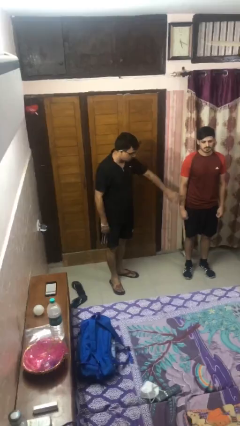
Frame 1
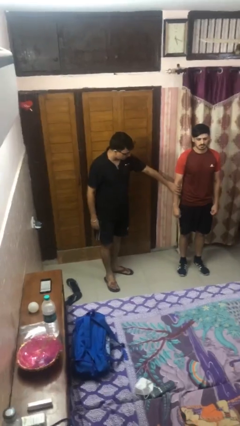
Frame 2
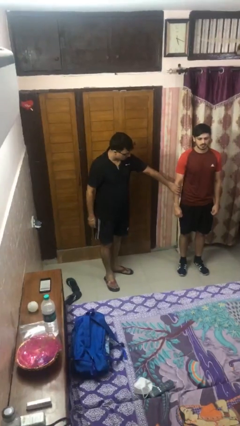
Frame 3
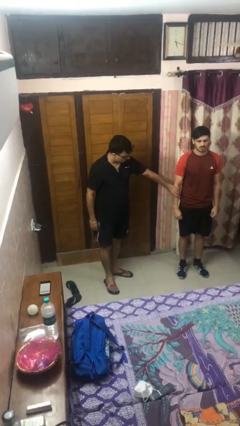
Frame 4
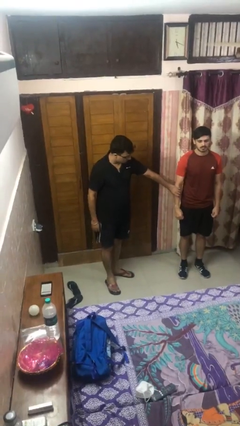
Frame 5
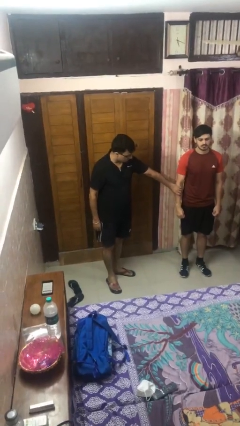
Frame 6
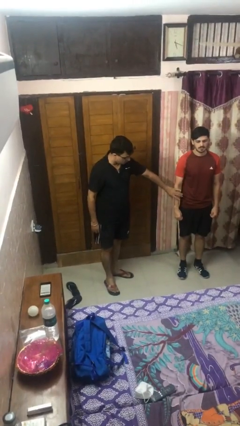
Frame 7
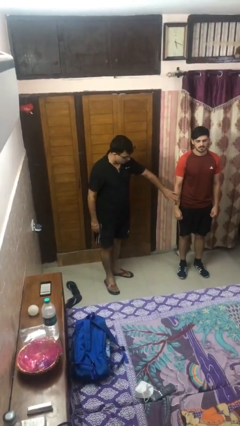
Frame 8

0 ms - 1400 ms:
person grabs person by forearm

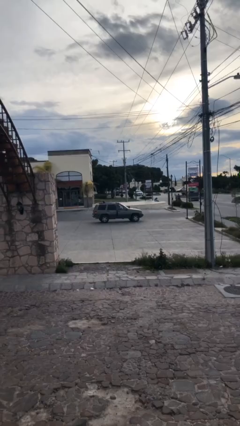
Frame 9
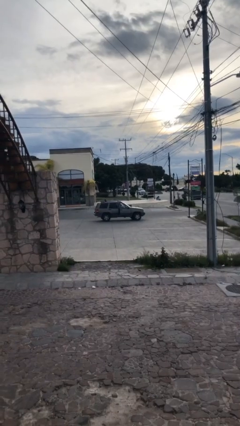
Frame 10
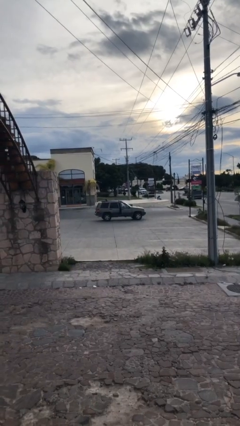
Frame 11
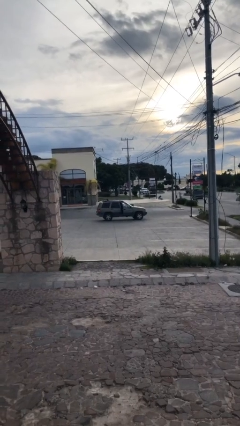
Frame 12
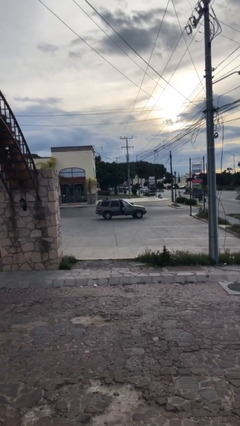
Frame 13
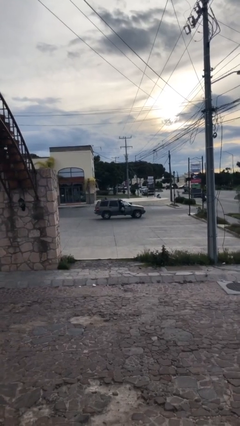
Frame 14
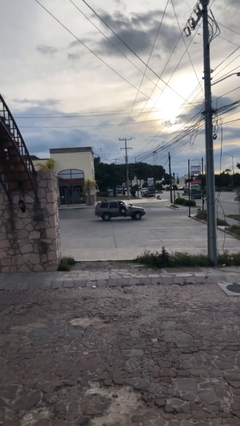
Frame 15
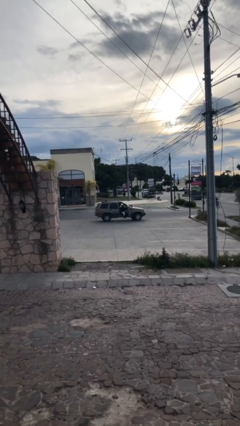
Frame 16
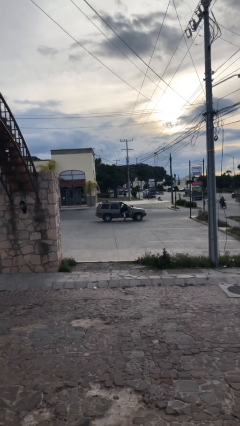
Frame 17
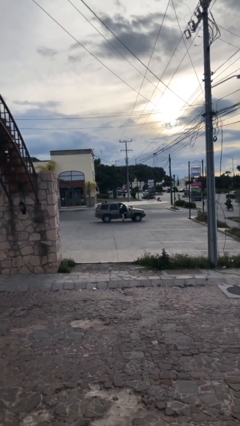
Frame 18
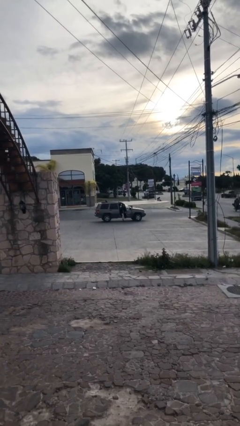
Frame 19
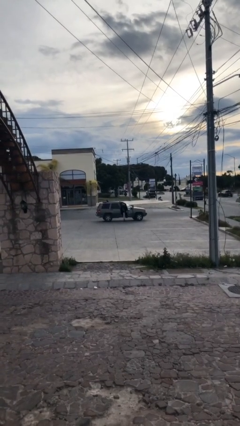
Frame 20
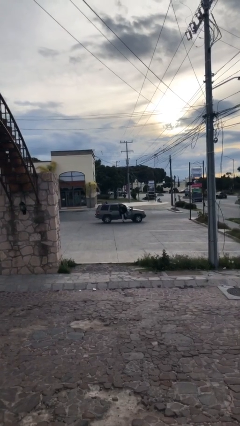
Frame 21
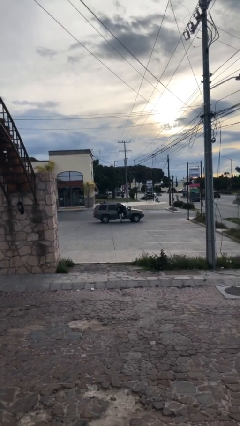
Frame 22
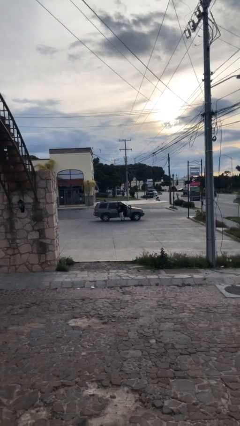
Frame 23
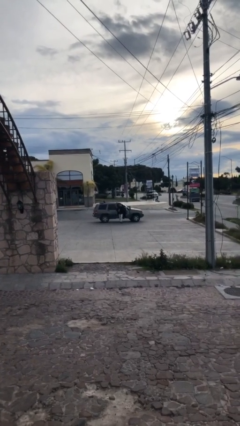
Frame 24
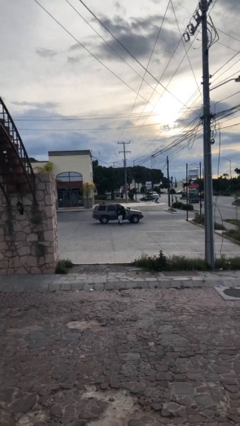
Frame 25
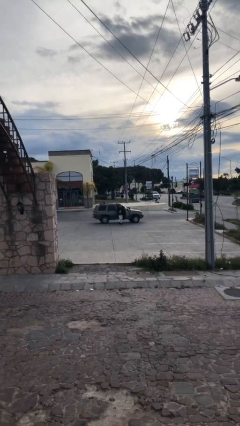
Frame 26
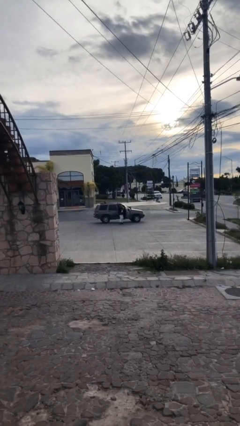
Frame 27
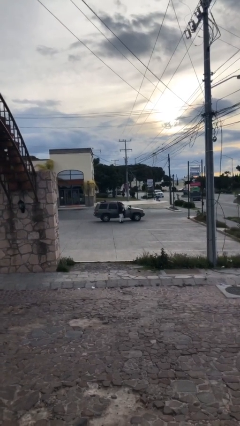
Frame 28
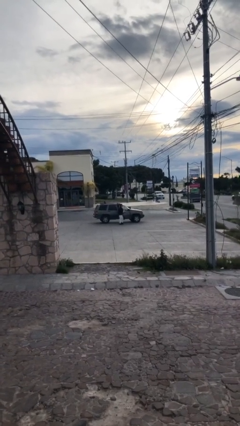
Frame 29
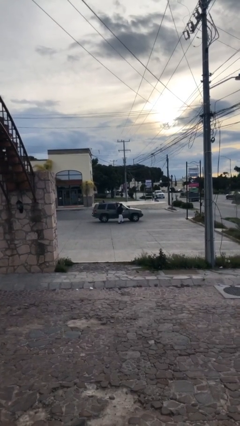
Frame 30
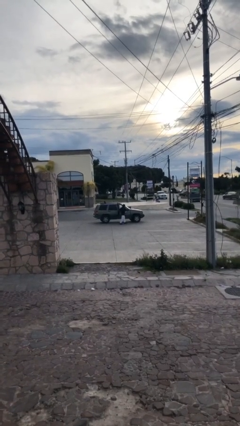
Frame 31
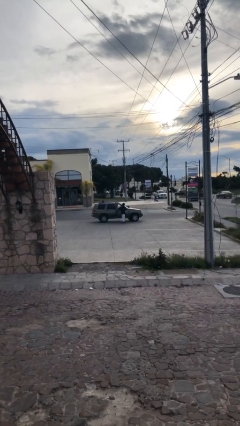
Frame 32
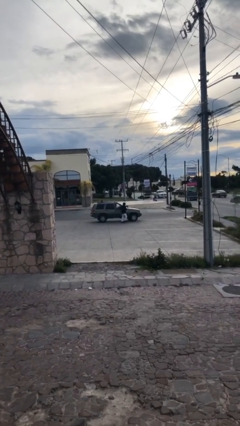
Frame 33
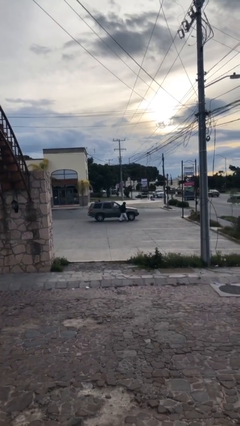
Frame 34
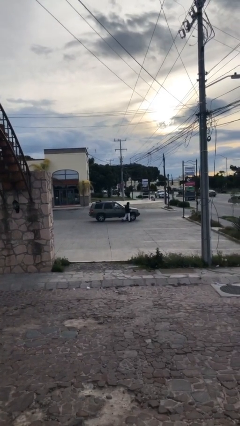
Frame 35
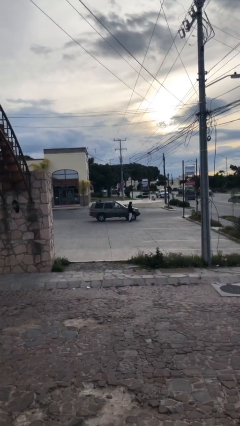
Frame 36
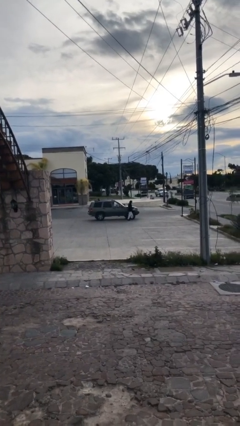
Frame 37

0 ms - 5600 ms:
car drops off person

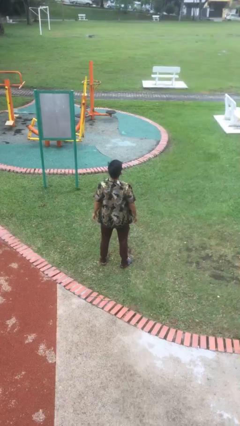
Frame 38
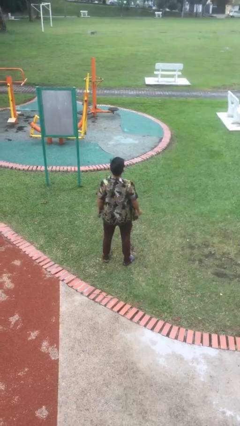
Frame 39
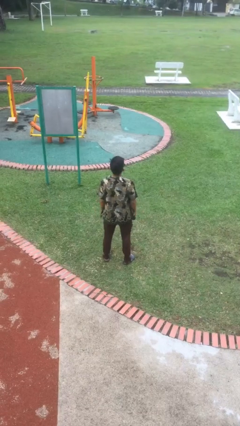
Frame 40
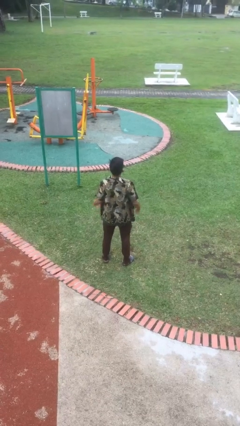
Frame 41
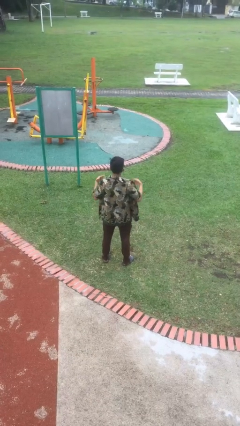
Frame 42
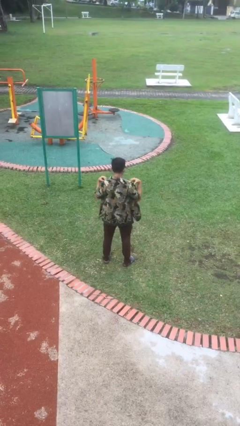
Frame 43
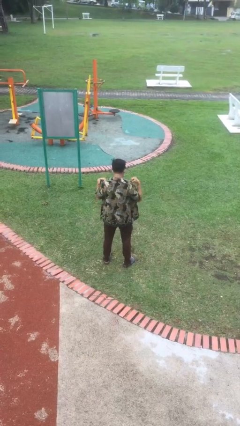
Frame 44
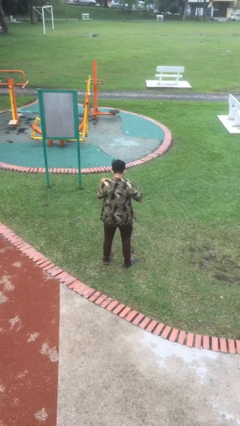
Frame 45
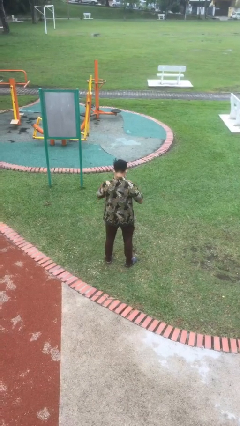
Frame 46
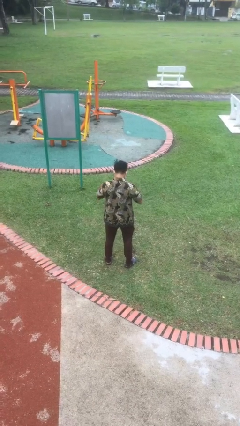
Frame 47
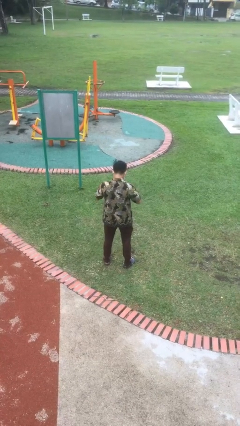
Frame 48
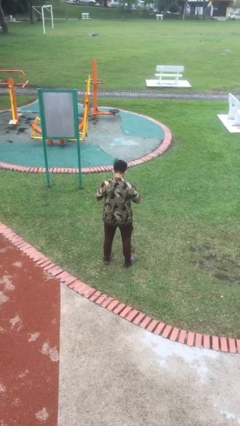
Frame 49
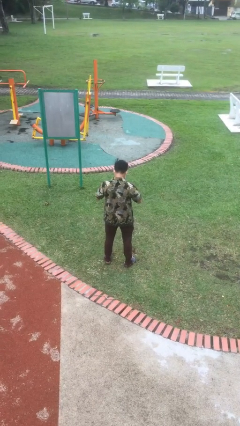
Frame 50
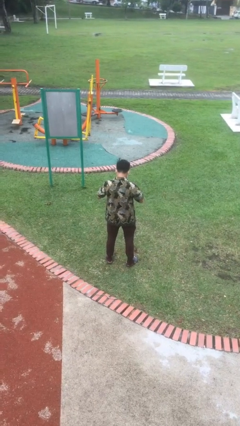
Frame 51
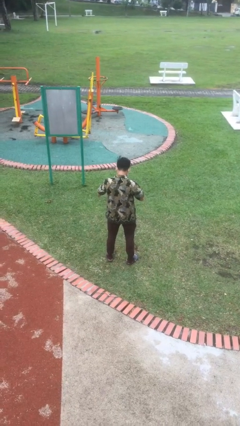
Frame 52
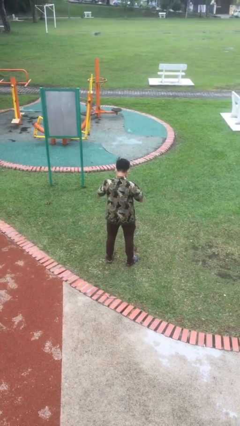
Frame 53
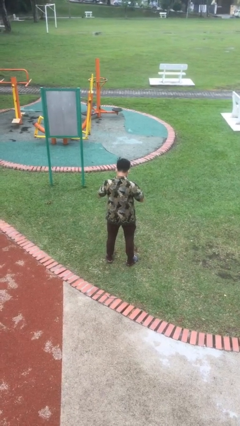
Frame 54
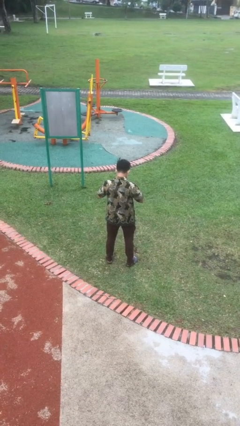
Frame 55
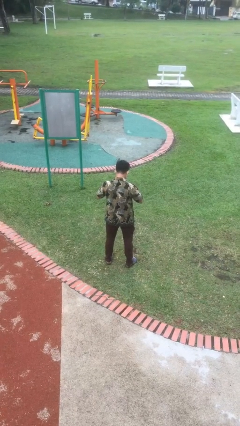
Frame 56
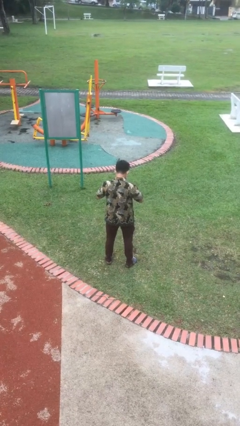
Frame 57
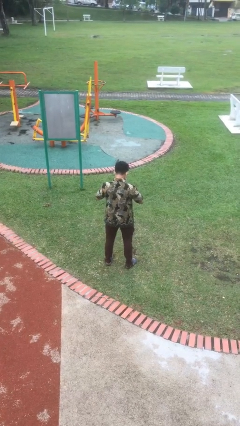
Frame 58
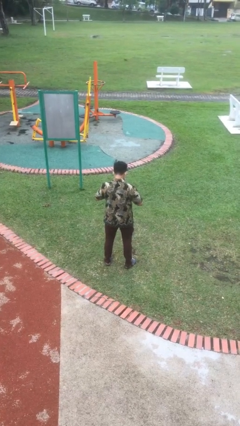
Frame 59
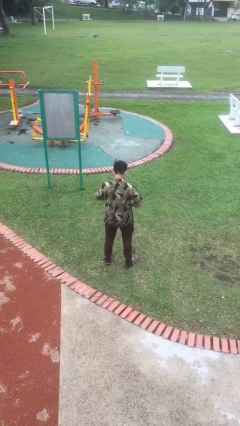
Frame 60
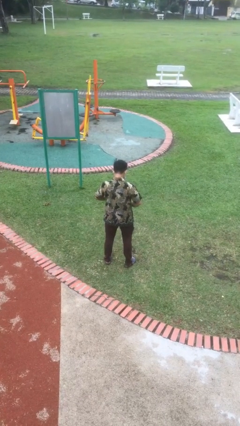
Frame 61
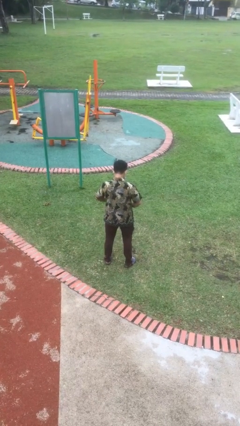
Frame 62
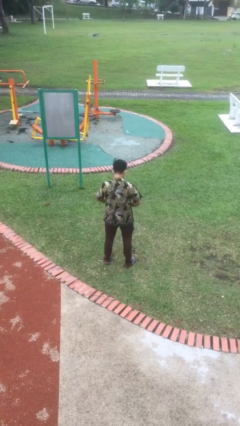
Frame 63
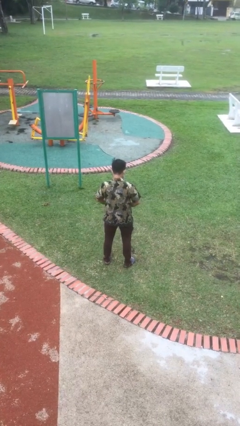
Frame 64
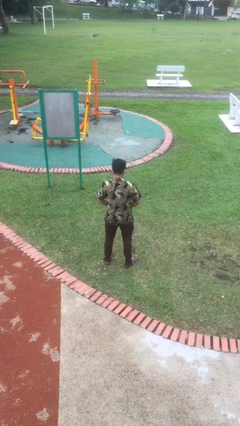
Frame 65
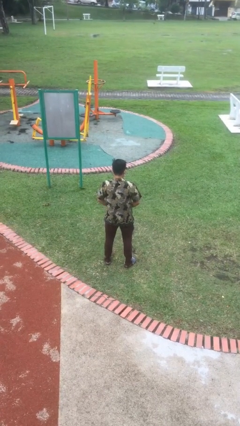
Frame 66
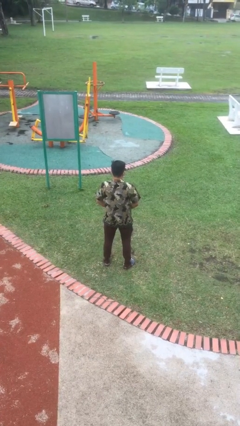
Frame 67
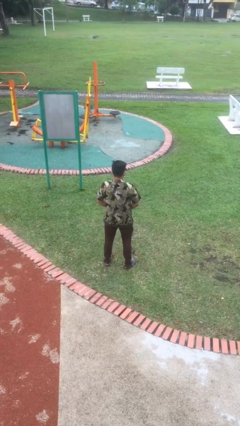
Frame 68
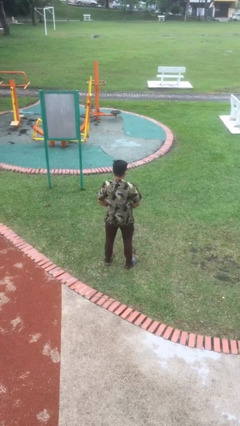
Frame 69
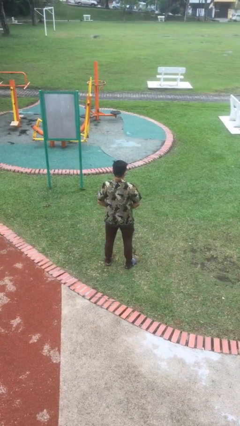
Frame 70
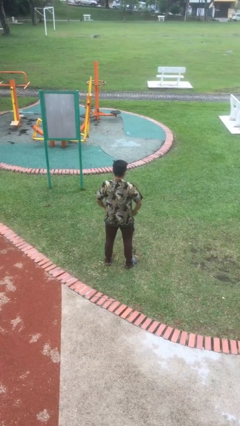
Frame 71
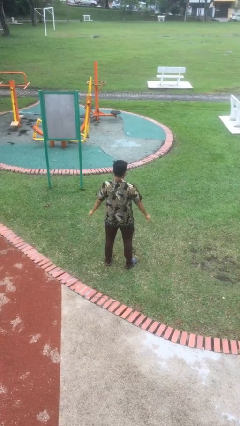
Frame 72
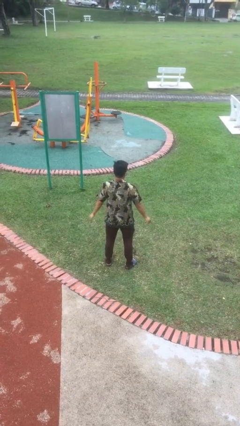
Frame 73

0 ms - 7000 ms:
person buttons shirt

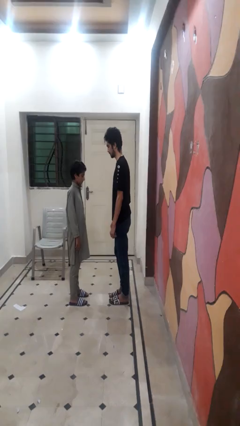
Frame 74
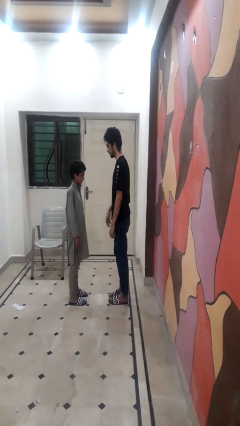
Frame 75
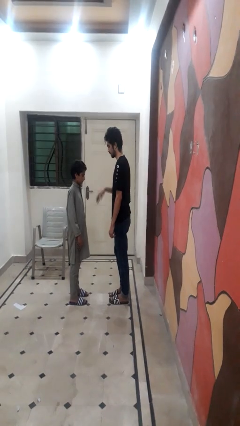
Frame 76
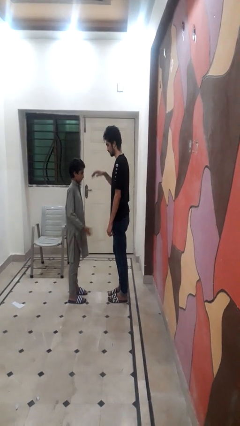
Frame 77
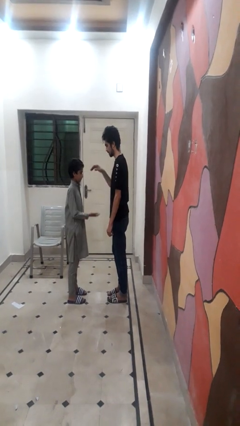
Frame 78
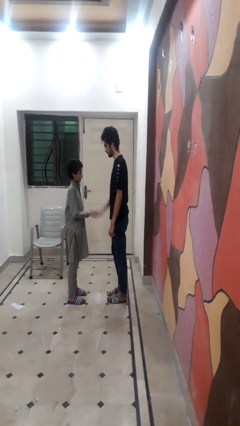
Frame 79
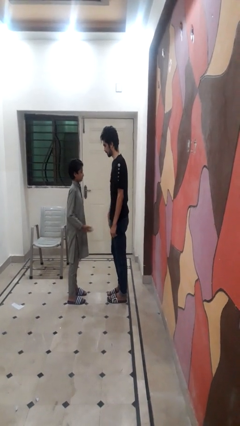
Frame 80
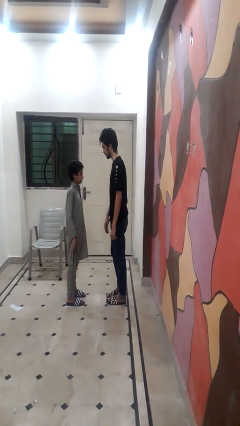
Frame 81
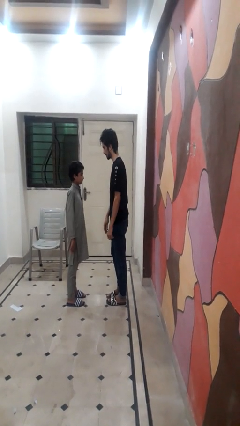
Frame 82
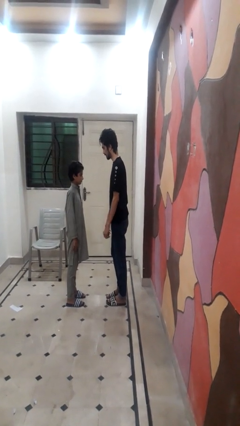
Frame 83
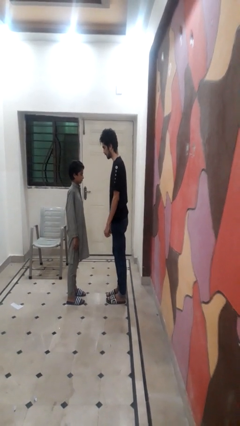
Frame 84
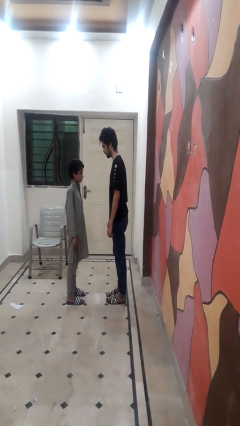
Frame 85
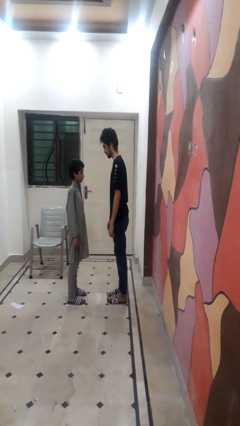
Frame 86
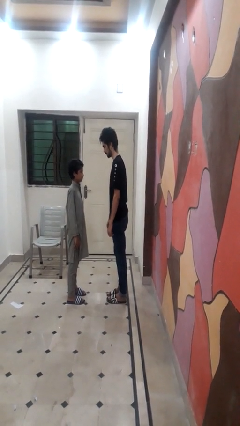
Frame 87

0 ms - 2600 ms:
person highfives hand

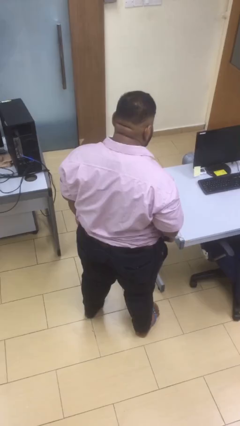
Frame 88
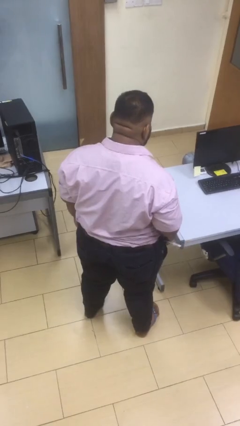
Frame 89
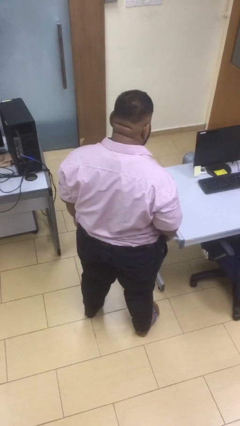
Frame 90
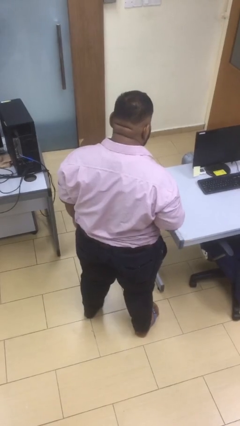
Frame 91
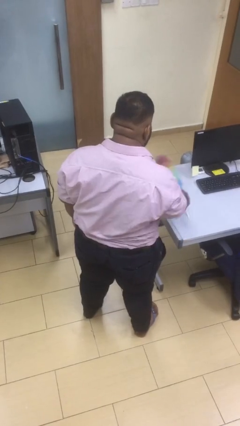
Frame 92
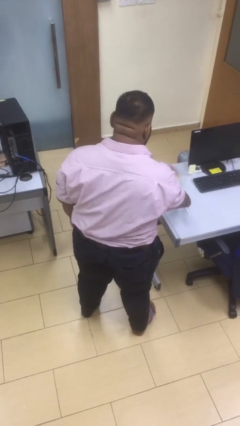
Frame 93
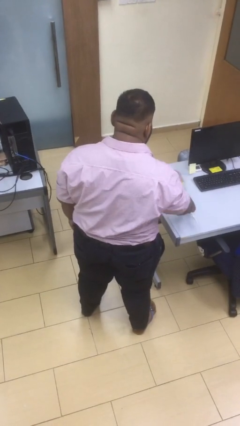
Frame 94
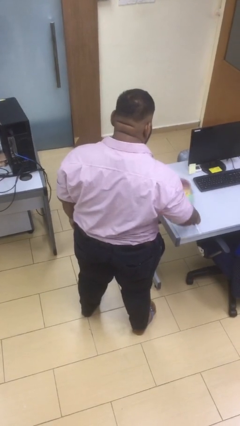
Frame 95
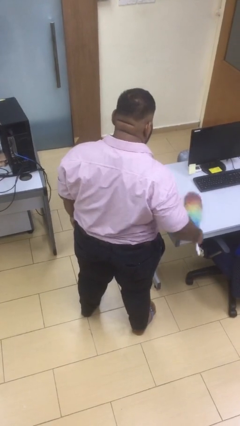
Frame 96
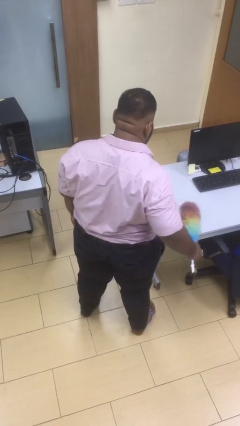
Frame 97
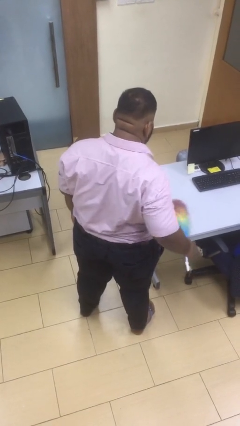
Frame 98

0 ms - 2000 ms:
person dusts furniture
